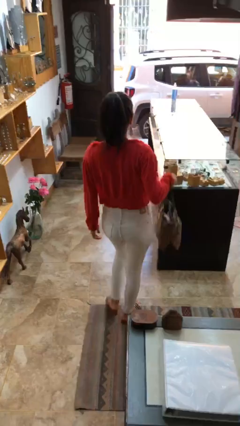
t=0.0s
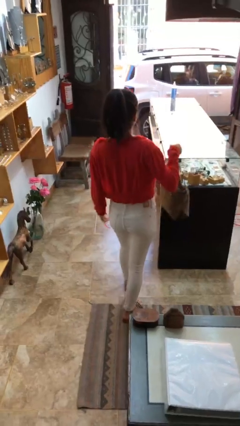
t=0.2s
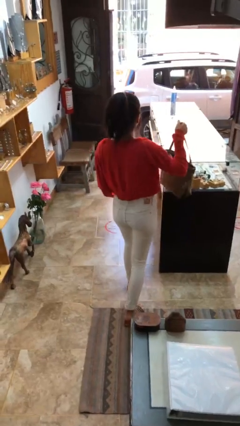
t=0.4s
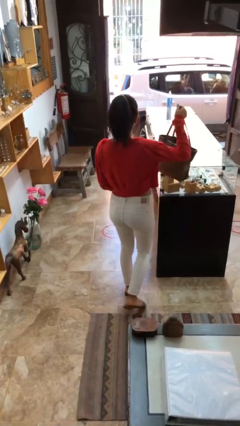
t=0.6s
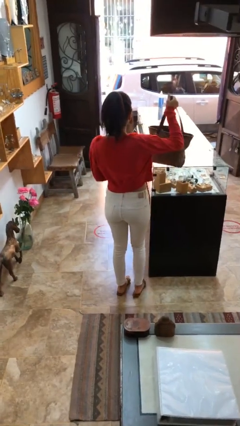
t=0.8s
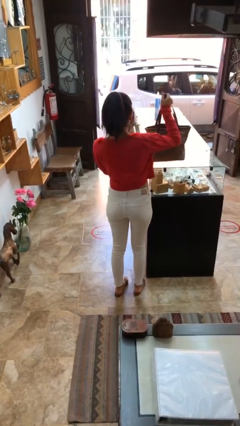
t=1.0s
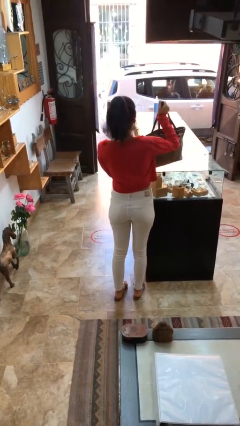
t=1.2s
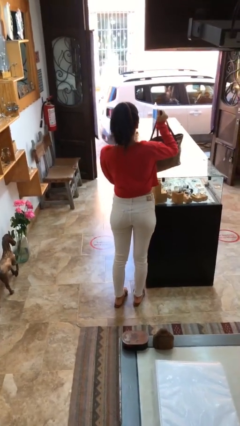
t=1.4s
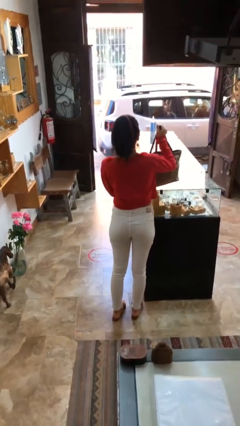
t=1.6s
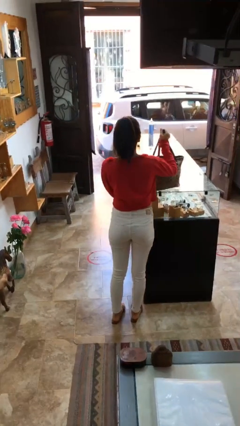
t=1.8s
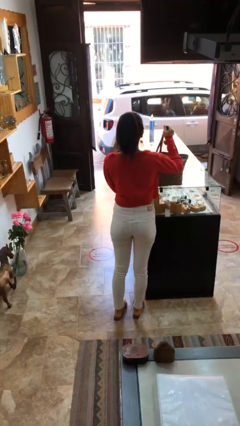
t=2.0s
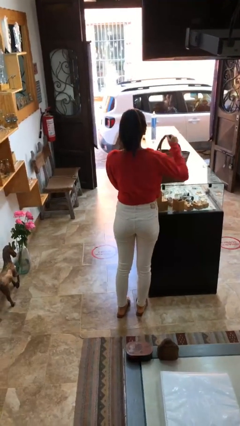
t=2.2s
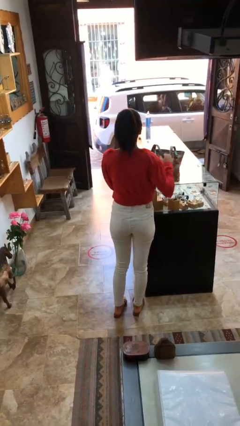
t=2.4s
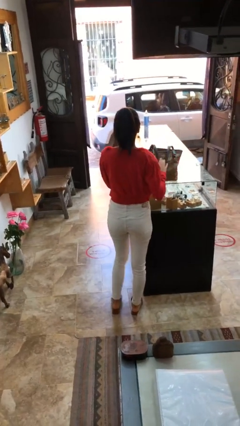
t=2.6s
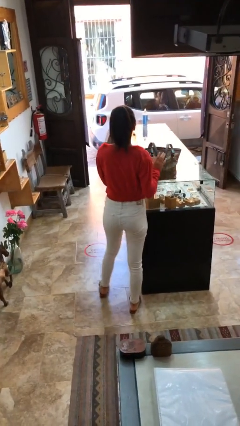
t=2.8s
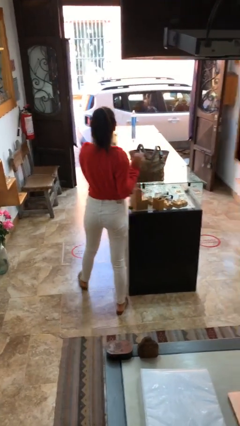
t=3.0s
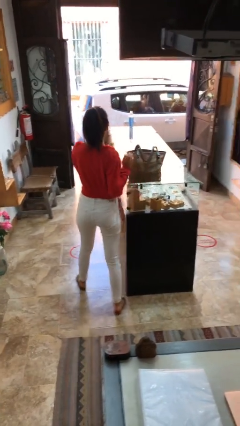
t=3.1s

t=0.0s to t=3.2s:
person puts down object on table

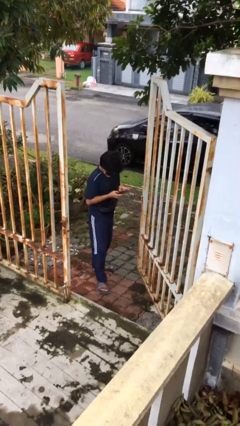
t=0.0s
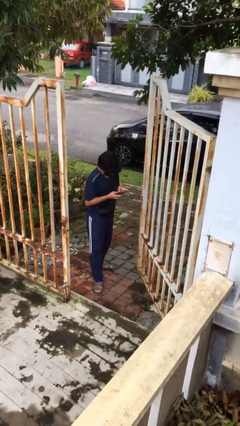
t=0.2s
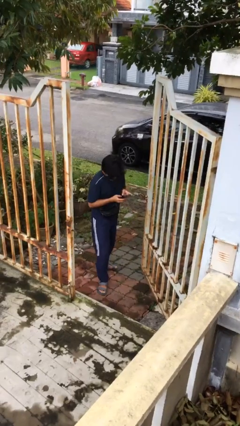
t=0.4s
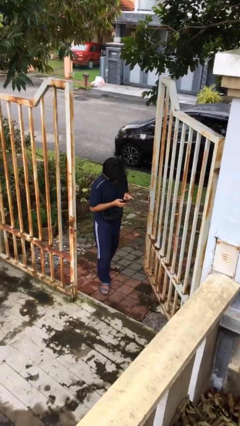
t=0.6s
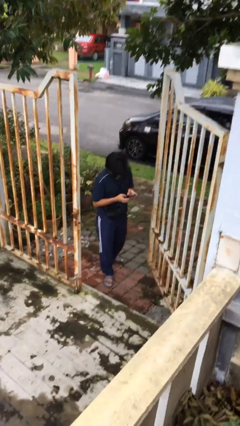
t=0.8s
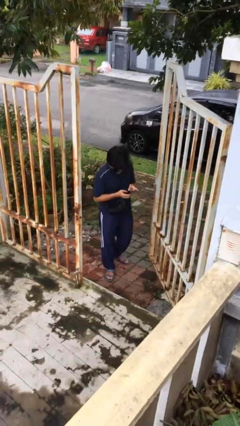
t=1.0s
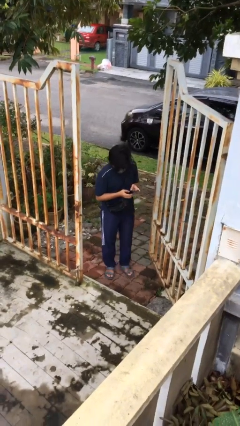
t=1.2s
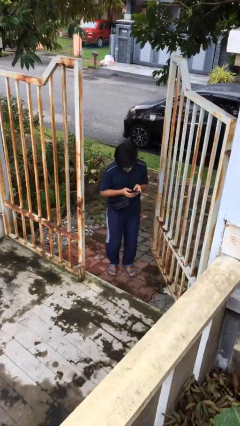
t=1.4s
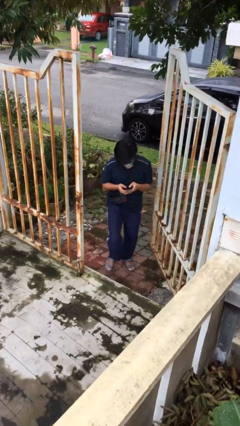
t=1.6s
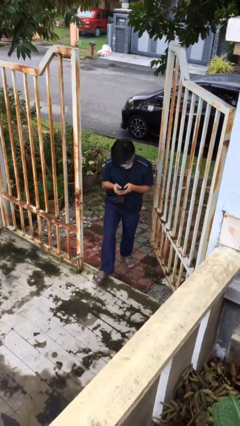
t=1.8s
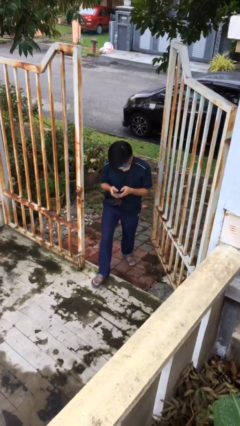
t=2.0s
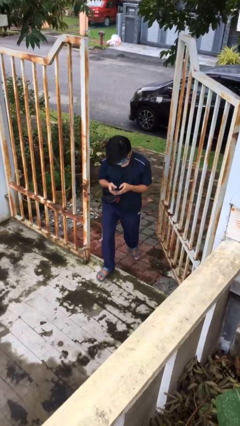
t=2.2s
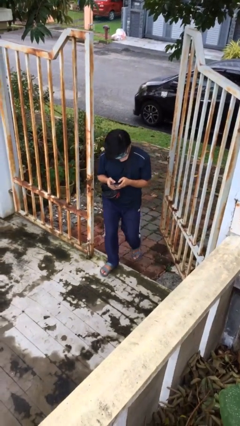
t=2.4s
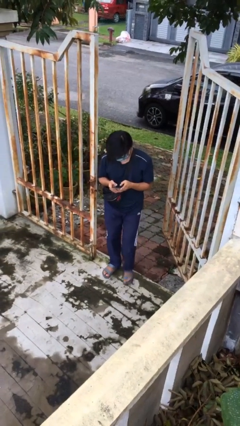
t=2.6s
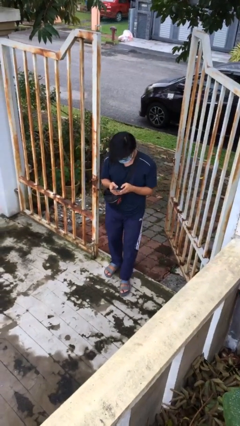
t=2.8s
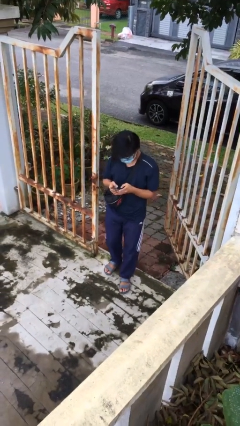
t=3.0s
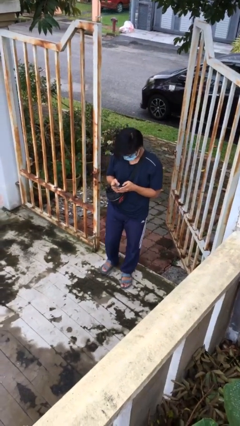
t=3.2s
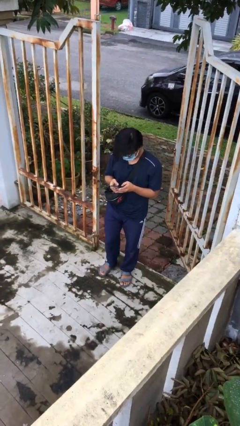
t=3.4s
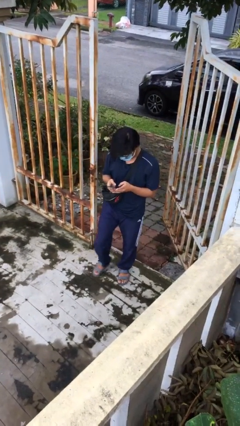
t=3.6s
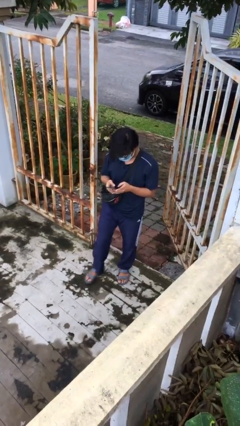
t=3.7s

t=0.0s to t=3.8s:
person enters scene through structure

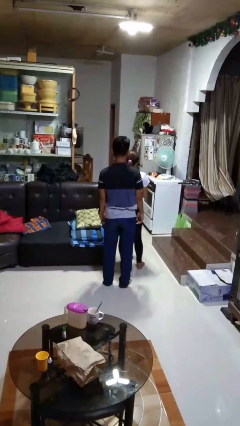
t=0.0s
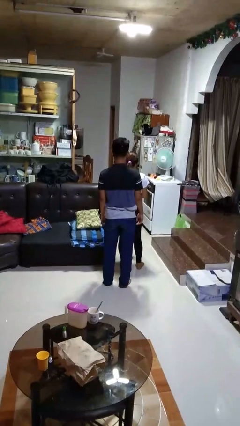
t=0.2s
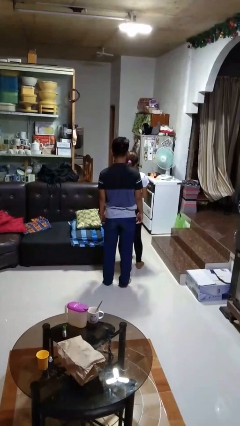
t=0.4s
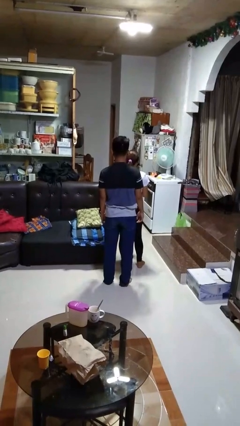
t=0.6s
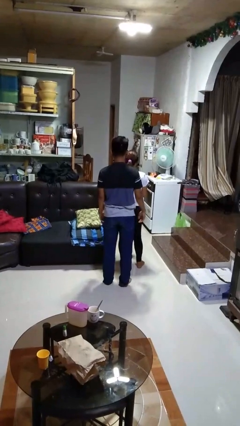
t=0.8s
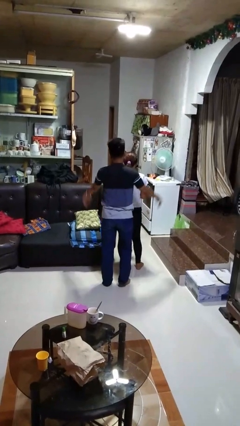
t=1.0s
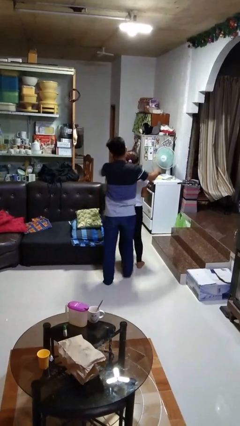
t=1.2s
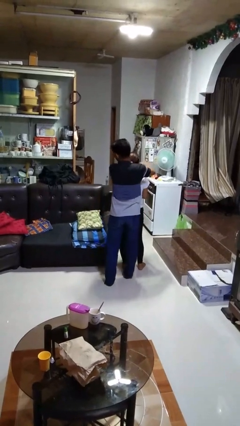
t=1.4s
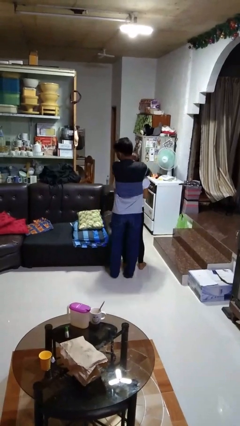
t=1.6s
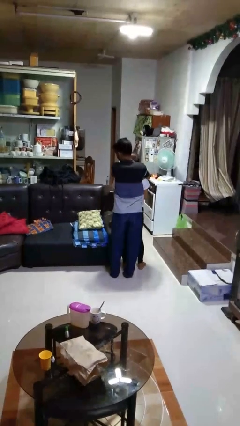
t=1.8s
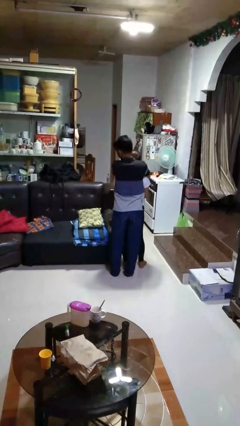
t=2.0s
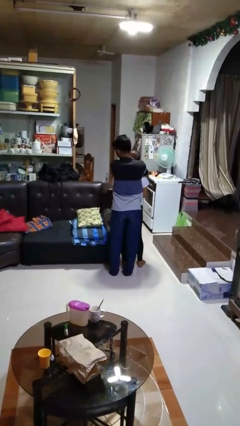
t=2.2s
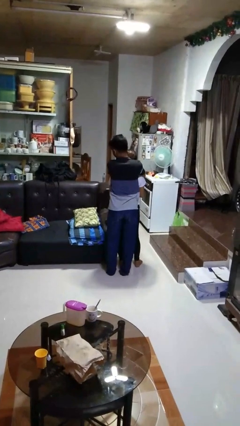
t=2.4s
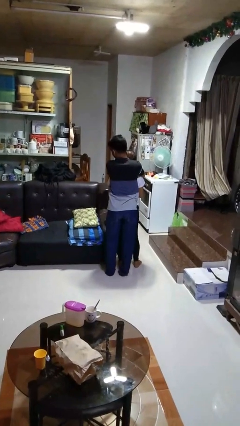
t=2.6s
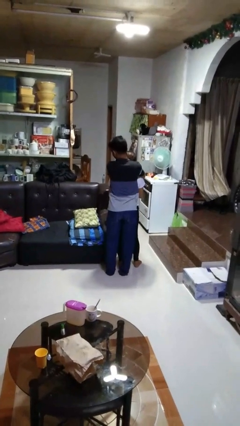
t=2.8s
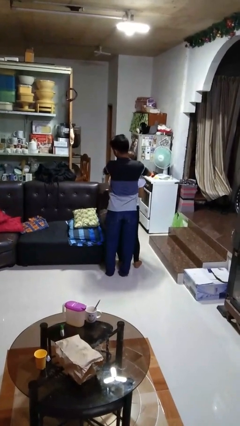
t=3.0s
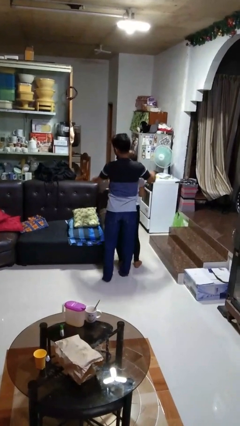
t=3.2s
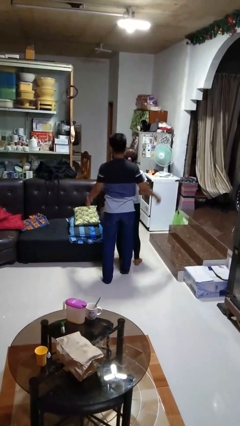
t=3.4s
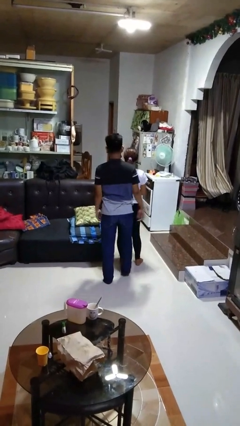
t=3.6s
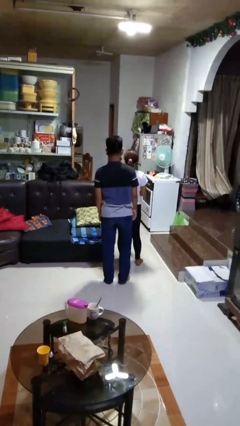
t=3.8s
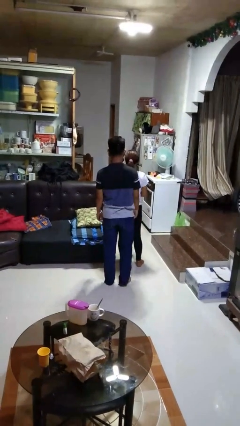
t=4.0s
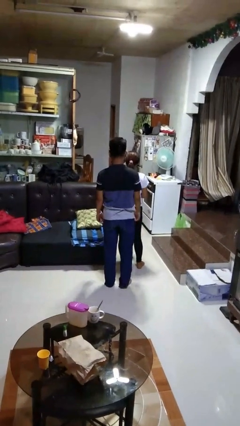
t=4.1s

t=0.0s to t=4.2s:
person hugs person from behind

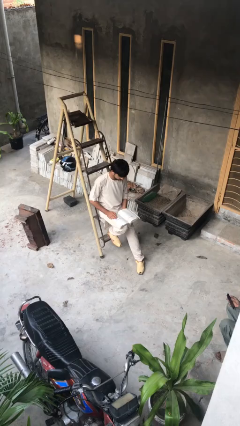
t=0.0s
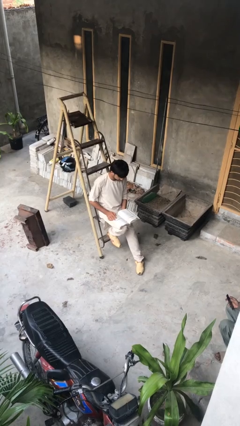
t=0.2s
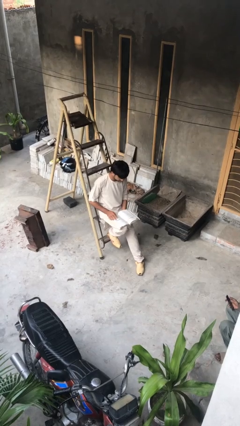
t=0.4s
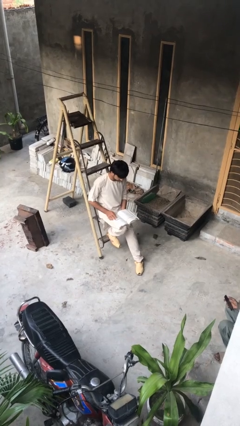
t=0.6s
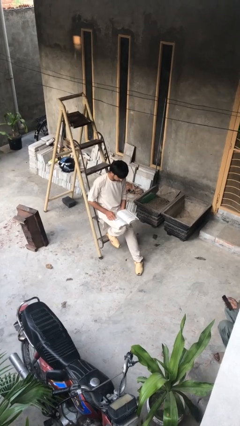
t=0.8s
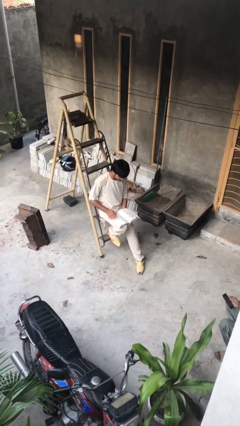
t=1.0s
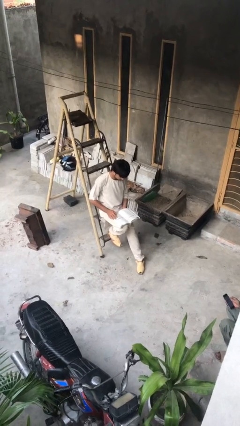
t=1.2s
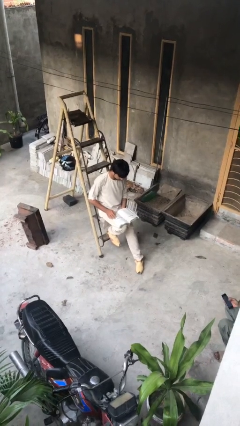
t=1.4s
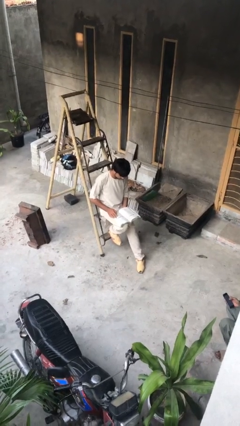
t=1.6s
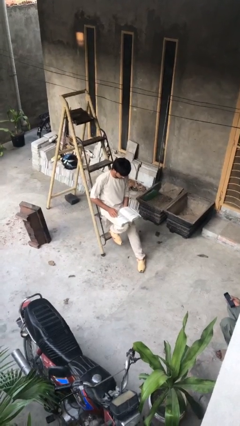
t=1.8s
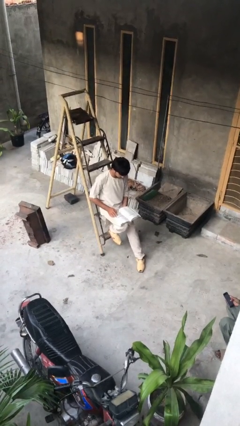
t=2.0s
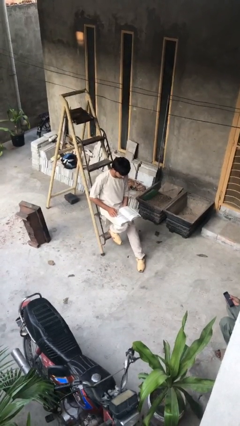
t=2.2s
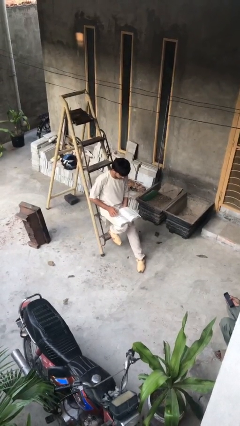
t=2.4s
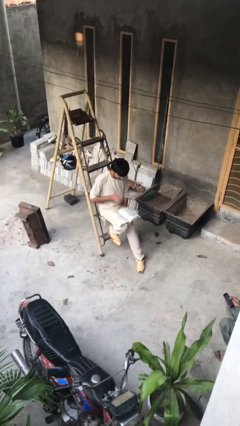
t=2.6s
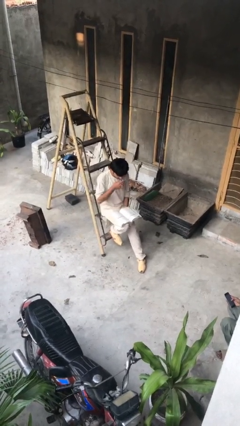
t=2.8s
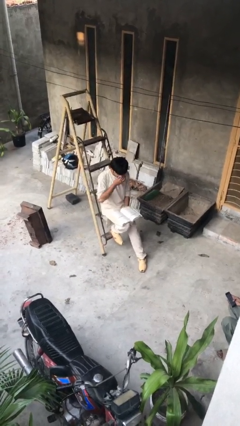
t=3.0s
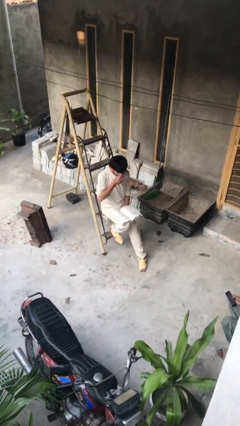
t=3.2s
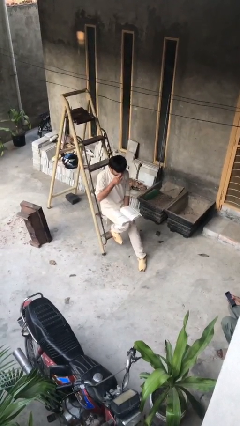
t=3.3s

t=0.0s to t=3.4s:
person reads document

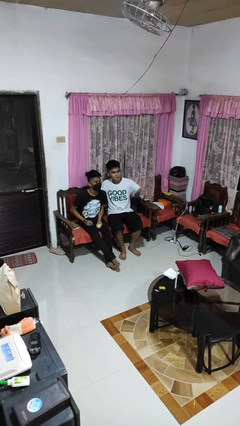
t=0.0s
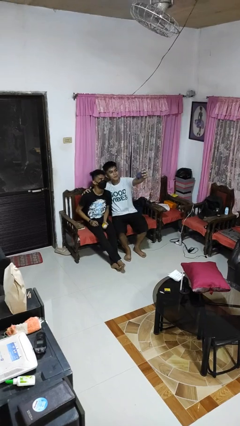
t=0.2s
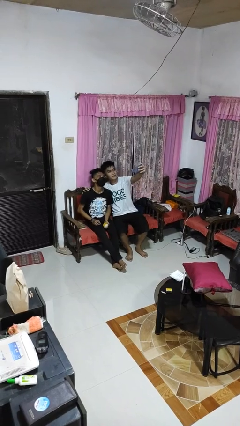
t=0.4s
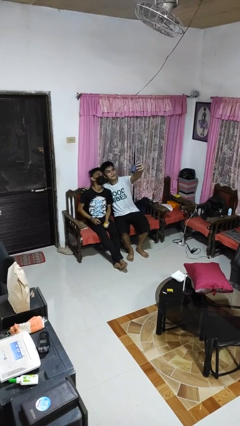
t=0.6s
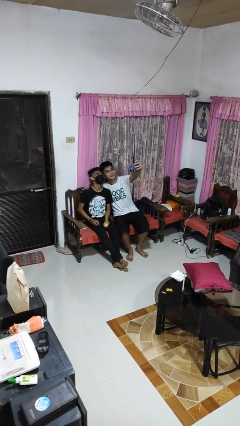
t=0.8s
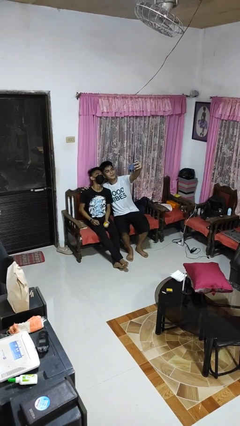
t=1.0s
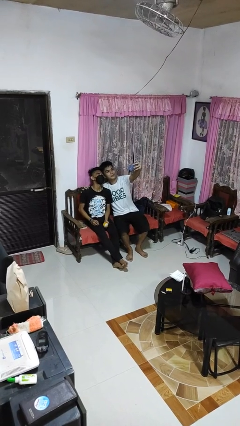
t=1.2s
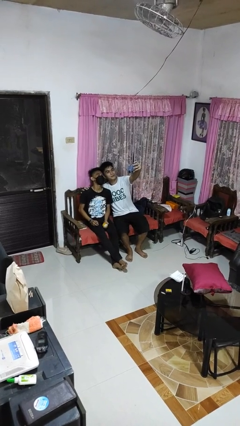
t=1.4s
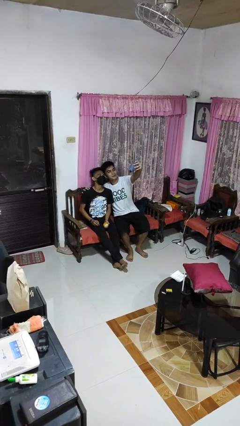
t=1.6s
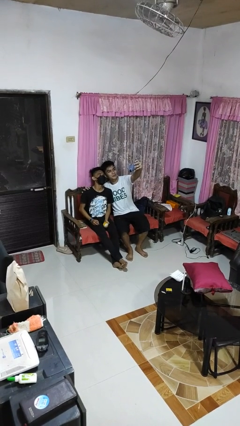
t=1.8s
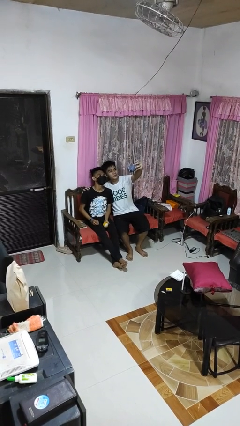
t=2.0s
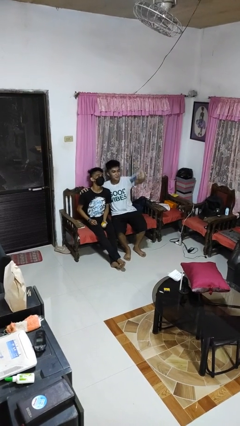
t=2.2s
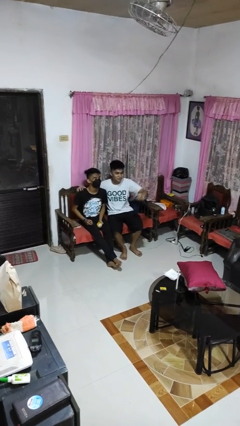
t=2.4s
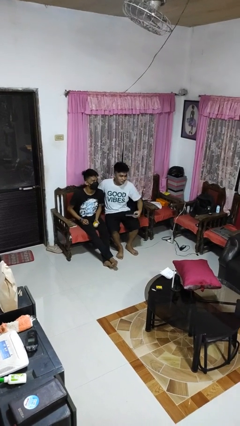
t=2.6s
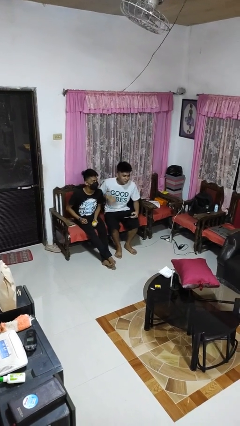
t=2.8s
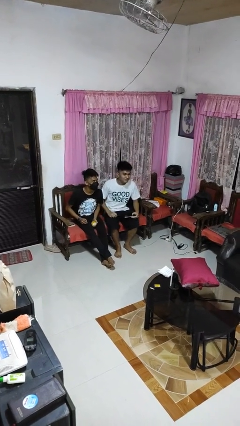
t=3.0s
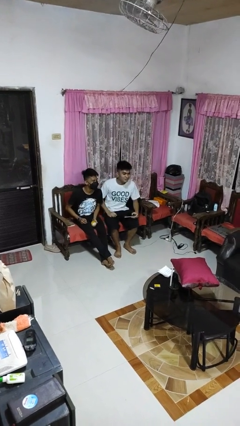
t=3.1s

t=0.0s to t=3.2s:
person takes selfie with person

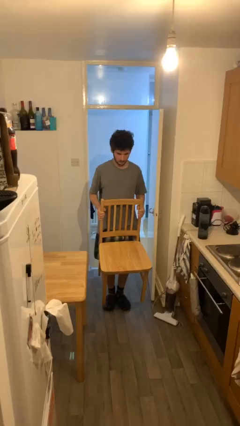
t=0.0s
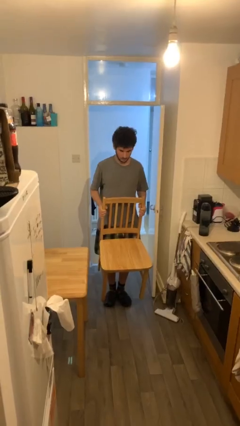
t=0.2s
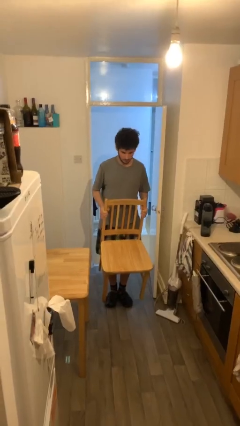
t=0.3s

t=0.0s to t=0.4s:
person puts down object on floor
